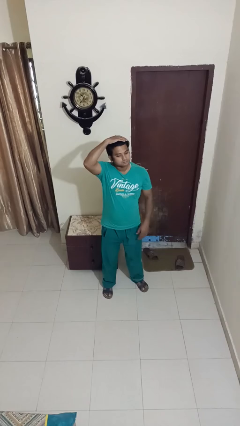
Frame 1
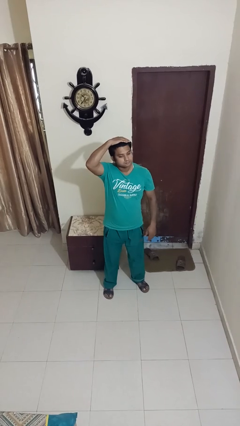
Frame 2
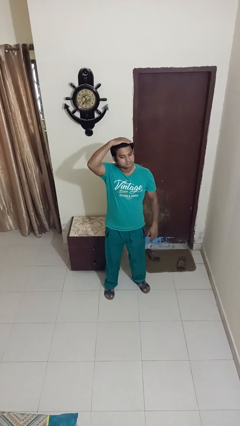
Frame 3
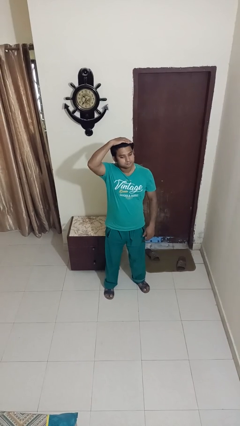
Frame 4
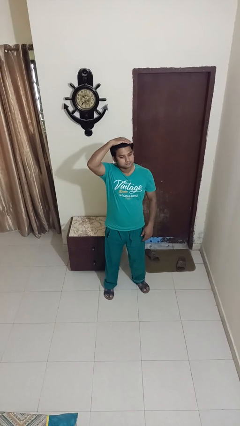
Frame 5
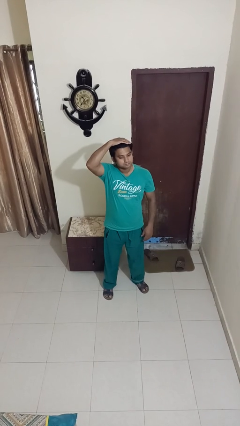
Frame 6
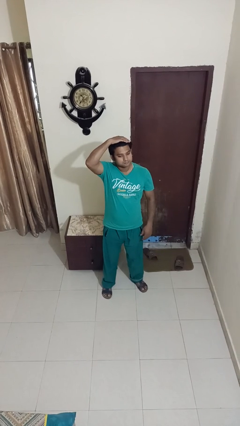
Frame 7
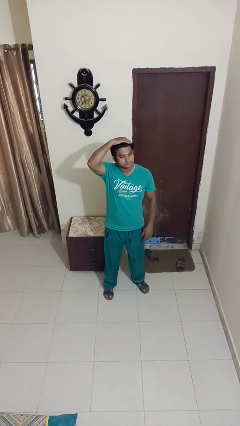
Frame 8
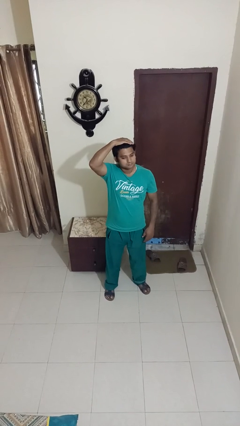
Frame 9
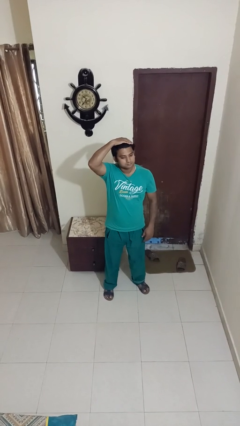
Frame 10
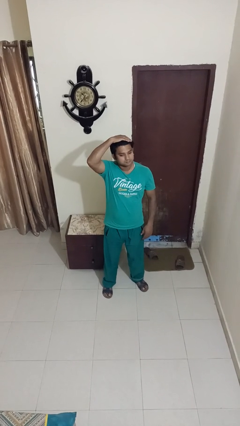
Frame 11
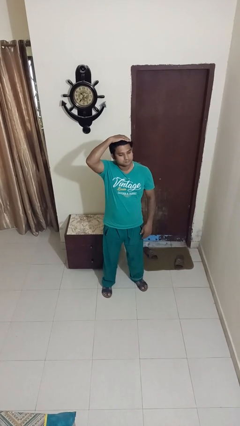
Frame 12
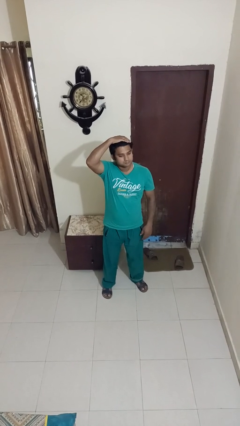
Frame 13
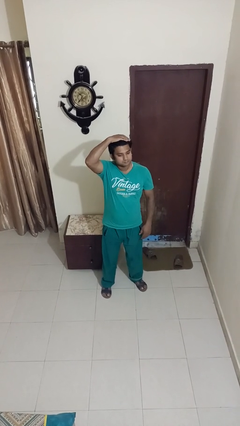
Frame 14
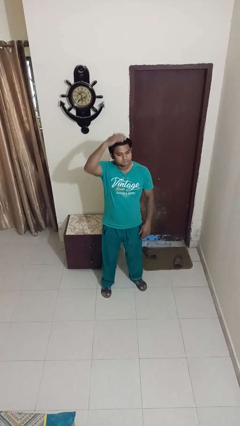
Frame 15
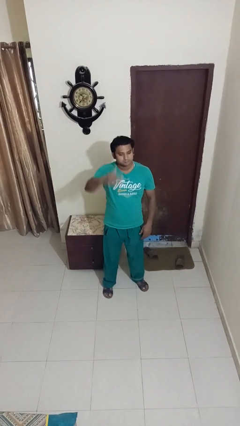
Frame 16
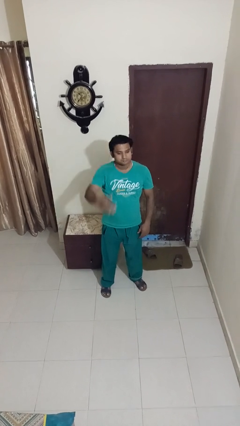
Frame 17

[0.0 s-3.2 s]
person pats head

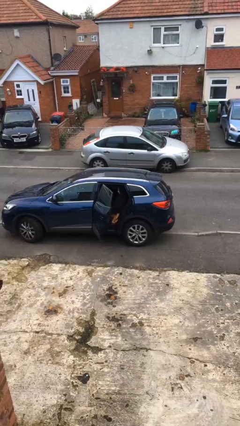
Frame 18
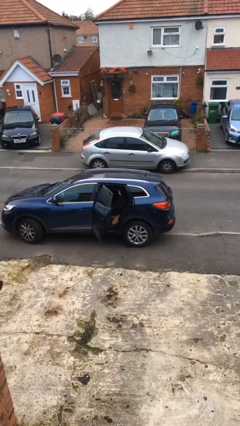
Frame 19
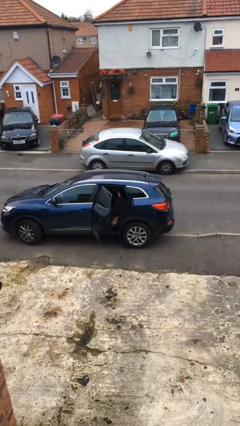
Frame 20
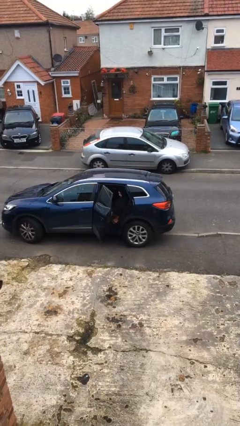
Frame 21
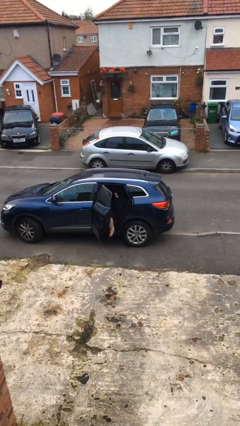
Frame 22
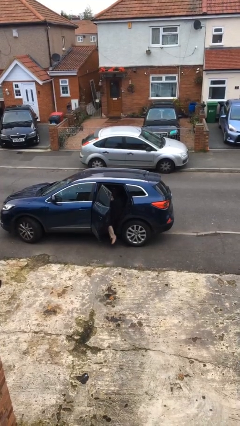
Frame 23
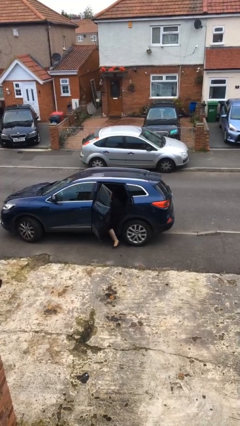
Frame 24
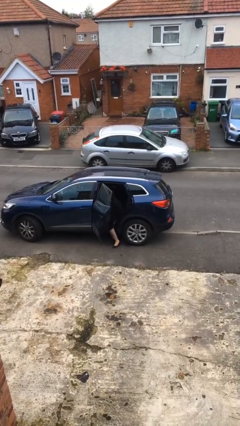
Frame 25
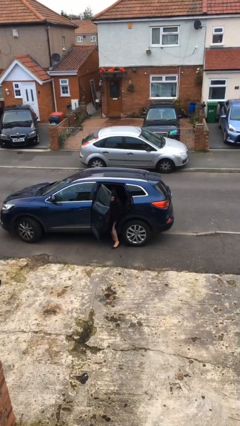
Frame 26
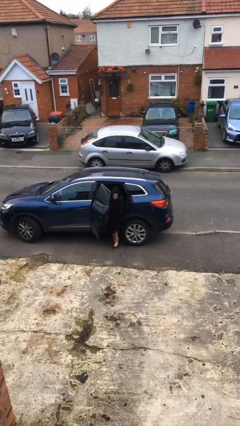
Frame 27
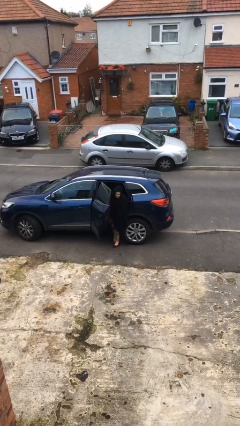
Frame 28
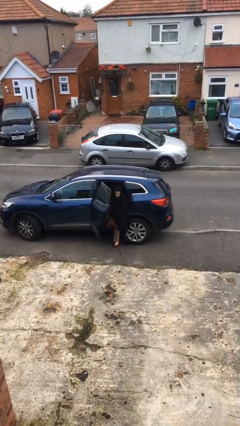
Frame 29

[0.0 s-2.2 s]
person exits car

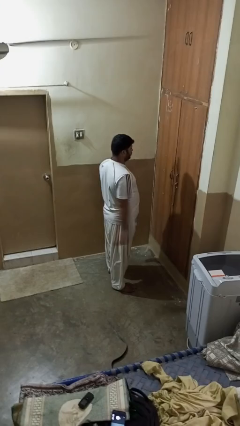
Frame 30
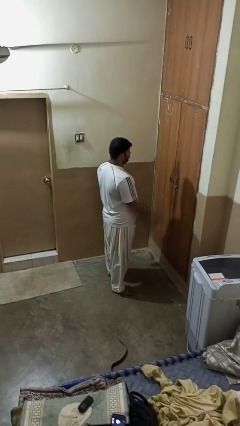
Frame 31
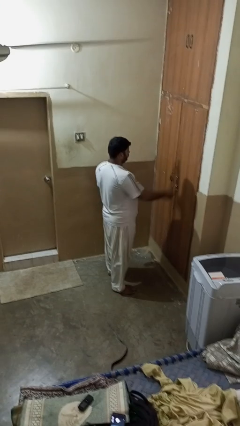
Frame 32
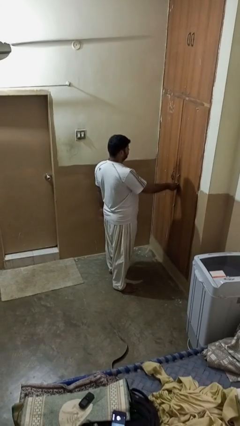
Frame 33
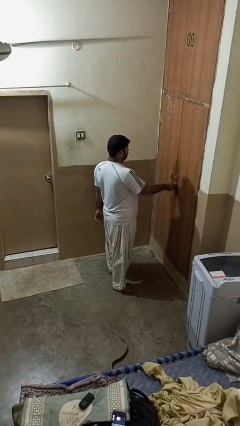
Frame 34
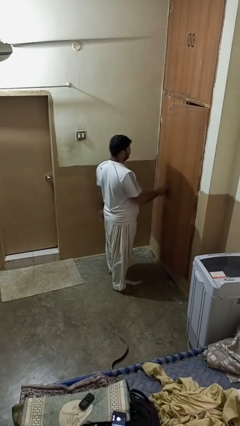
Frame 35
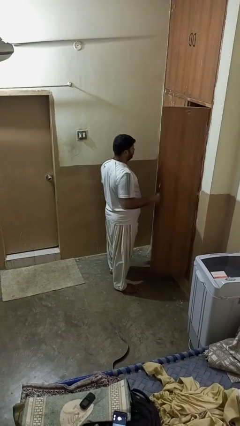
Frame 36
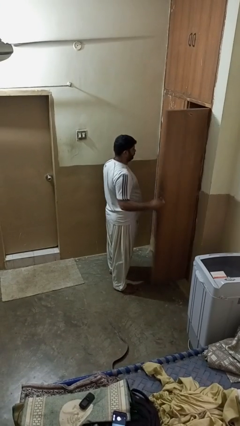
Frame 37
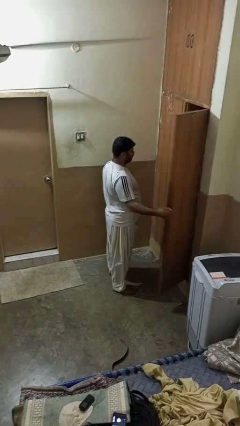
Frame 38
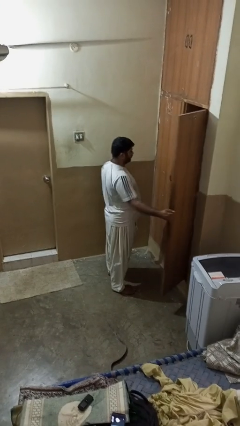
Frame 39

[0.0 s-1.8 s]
person opens closet door

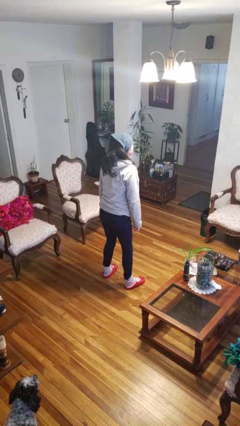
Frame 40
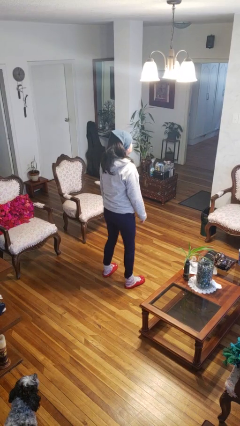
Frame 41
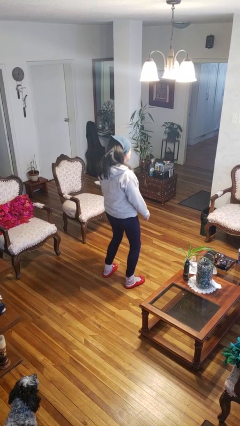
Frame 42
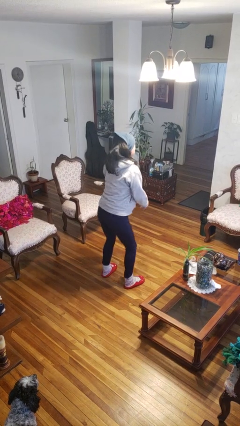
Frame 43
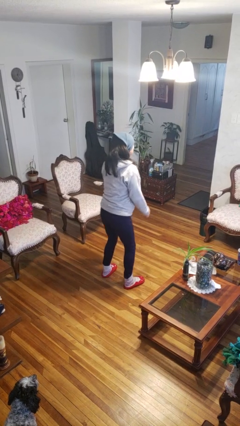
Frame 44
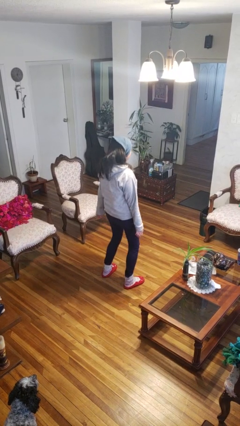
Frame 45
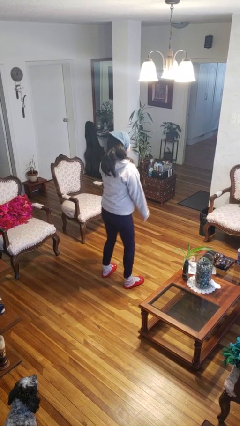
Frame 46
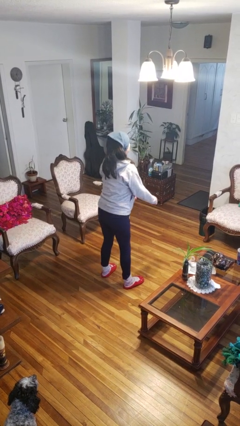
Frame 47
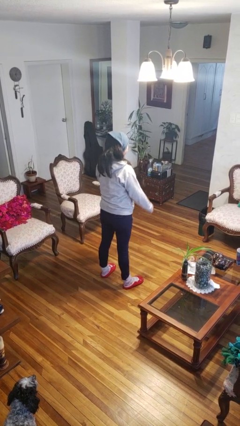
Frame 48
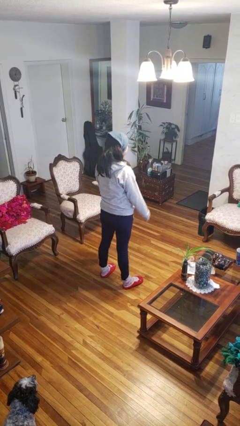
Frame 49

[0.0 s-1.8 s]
person wiggles hips

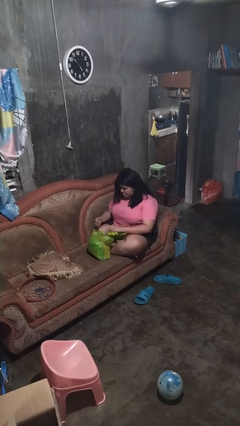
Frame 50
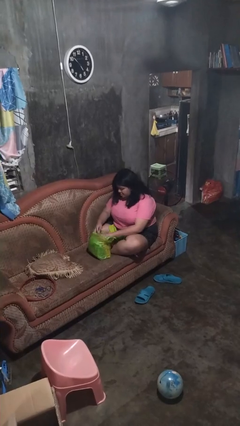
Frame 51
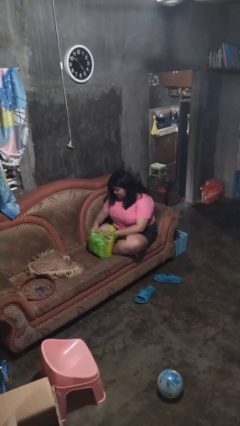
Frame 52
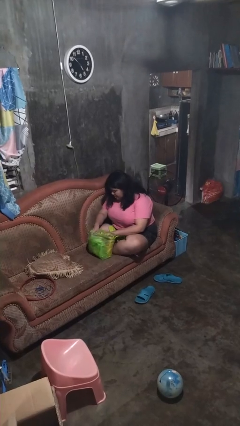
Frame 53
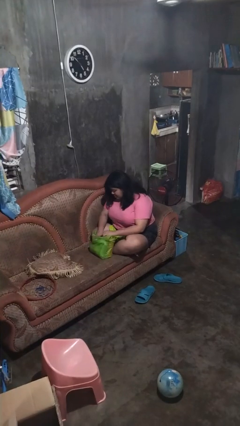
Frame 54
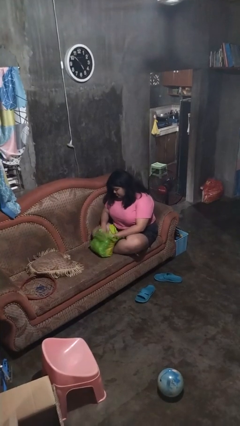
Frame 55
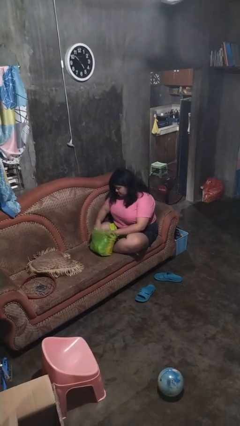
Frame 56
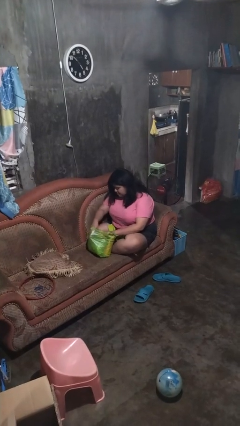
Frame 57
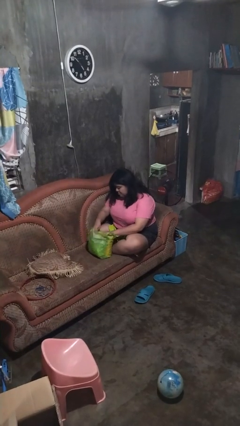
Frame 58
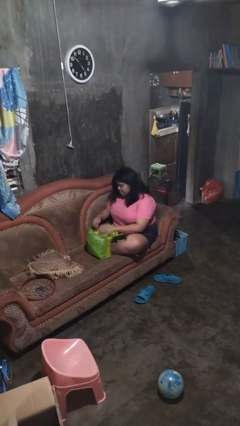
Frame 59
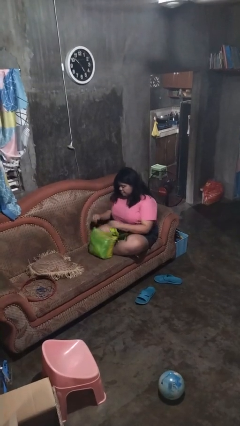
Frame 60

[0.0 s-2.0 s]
person searches in bag

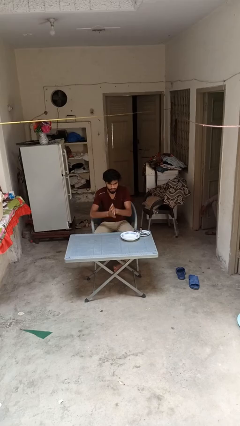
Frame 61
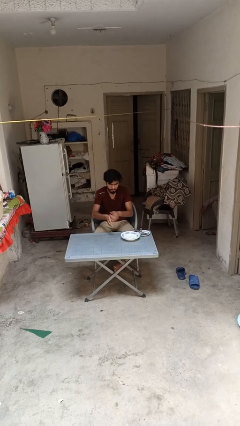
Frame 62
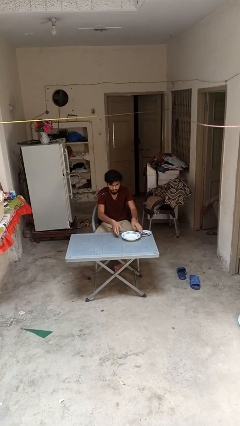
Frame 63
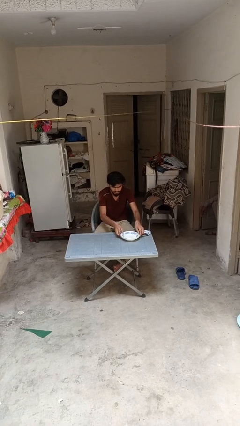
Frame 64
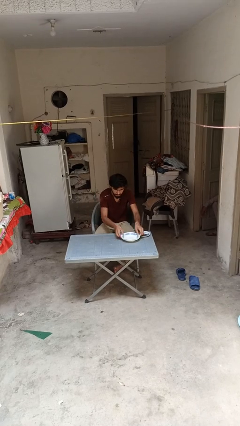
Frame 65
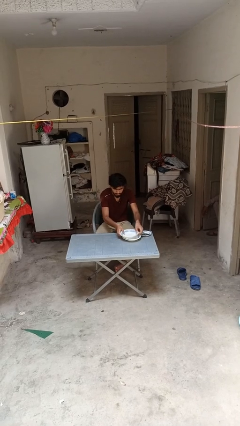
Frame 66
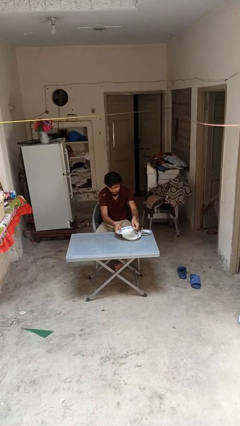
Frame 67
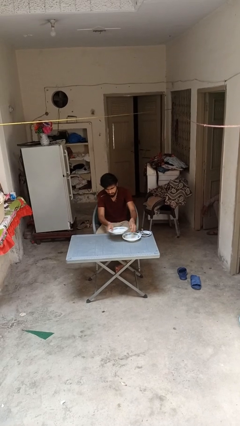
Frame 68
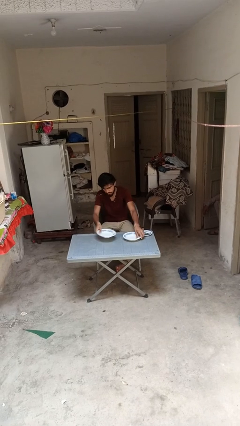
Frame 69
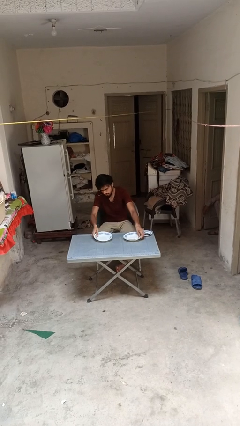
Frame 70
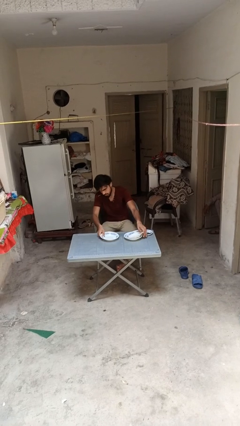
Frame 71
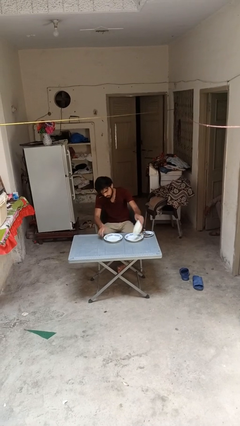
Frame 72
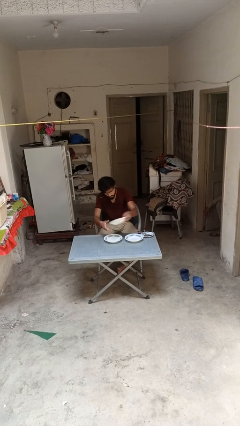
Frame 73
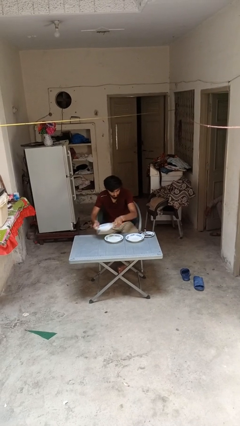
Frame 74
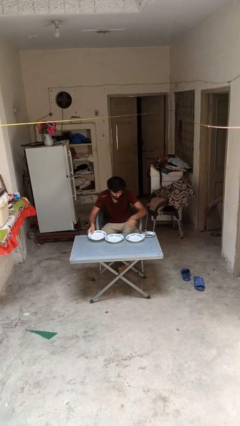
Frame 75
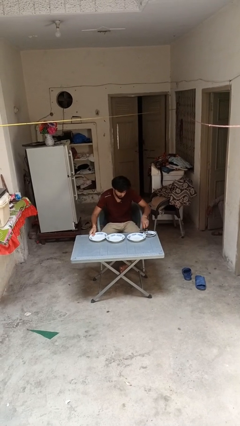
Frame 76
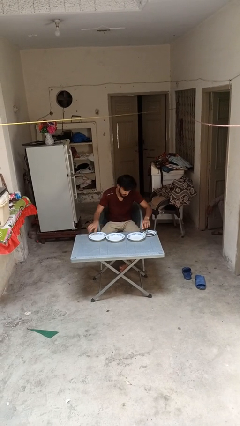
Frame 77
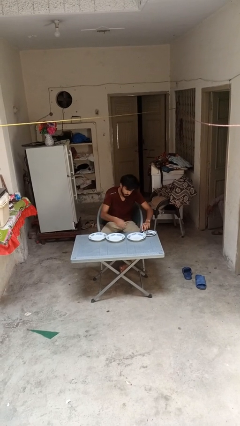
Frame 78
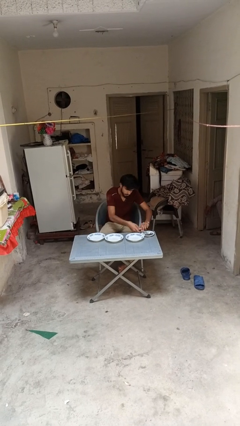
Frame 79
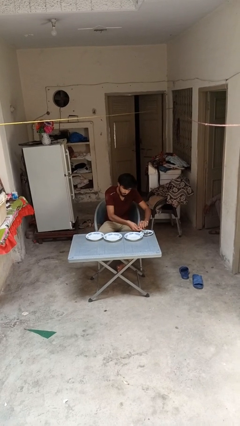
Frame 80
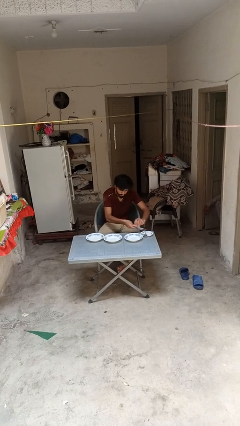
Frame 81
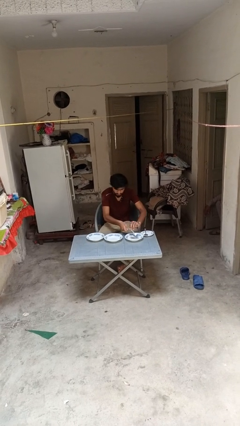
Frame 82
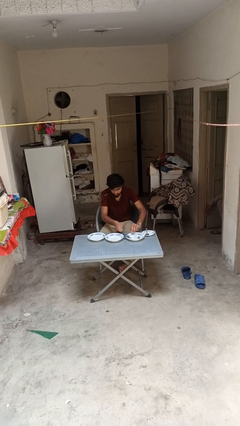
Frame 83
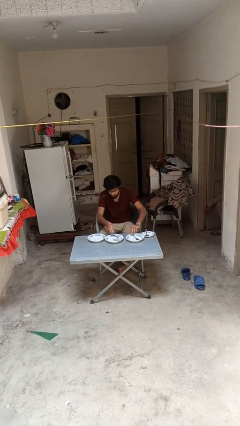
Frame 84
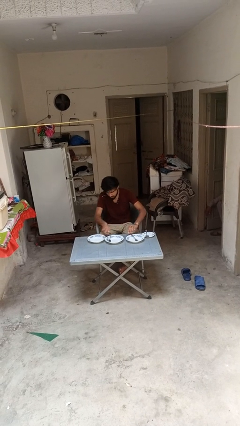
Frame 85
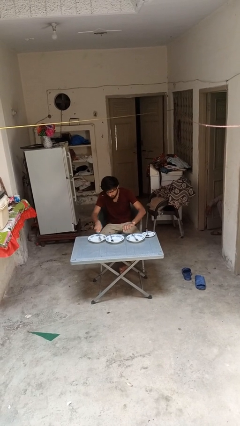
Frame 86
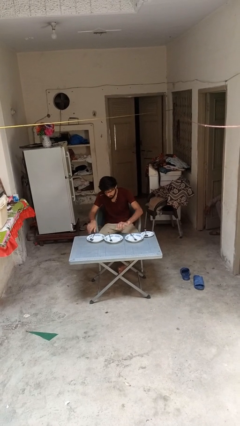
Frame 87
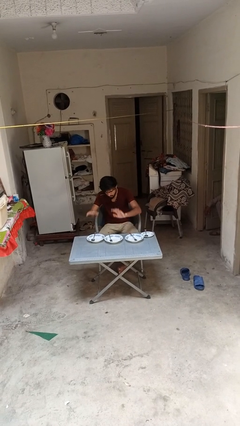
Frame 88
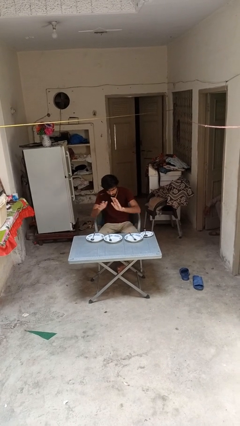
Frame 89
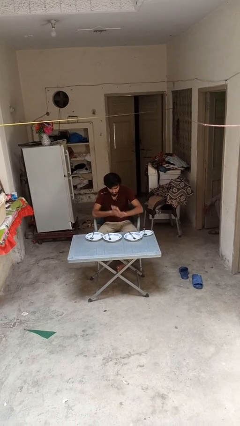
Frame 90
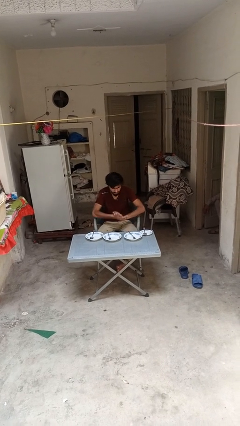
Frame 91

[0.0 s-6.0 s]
person sets table

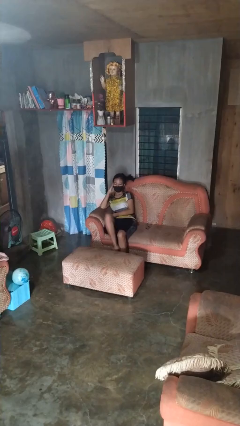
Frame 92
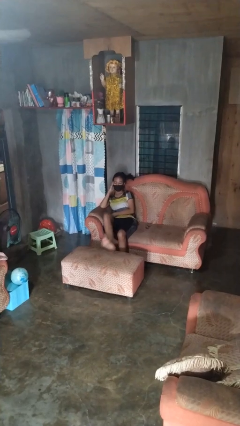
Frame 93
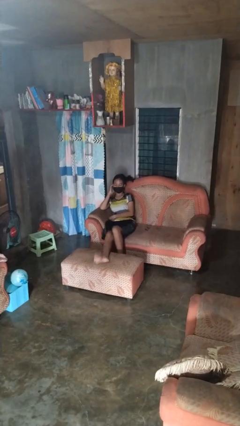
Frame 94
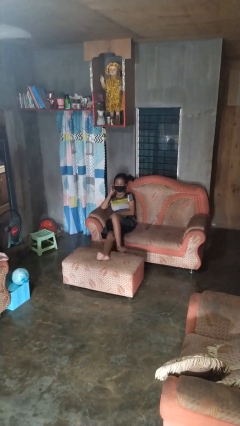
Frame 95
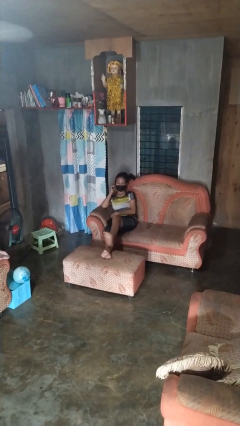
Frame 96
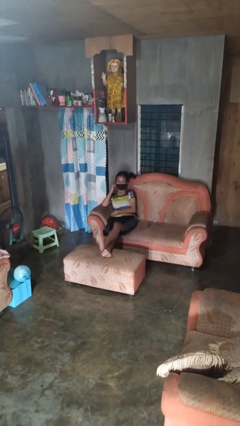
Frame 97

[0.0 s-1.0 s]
person puts feet up
